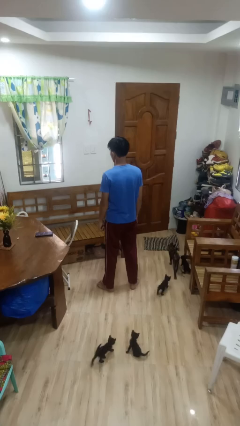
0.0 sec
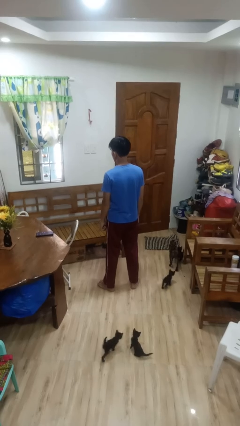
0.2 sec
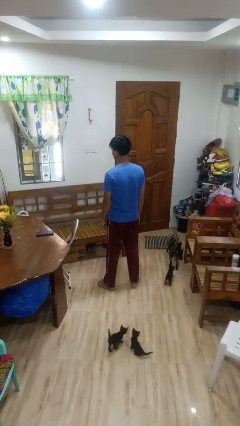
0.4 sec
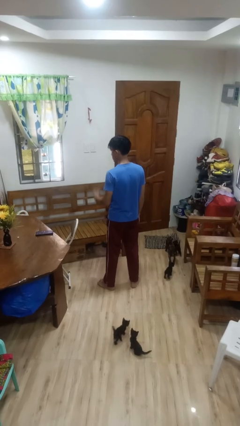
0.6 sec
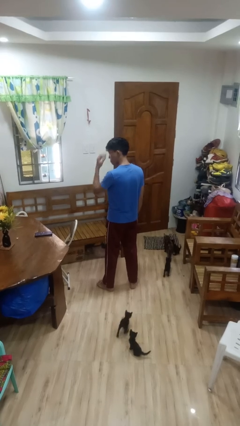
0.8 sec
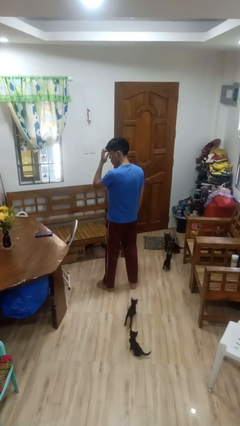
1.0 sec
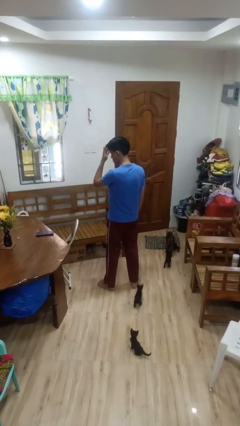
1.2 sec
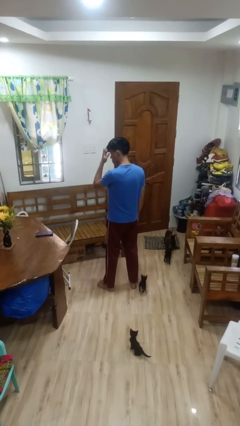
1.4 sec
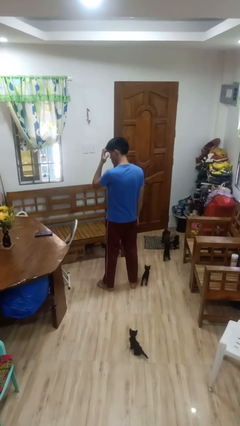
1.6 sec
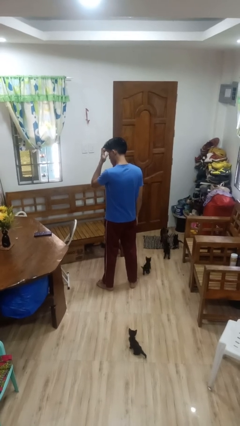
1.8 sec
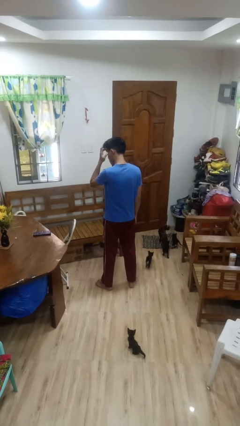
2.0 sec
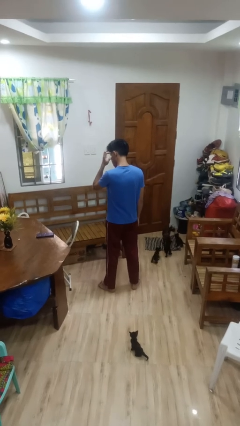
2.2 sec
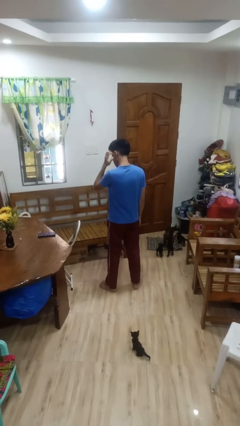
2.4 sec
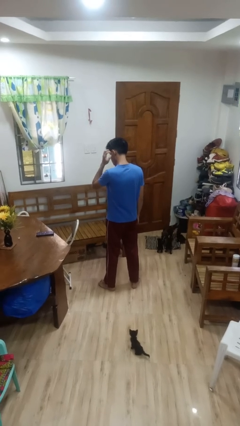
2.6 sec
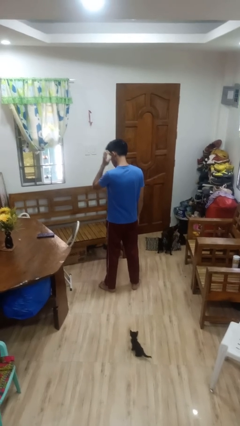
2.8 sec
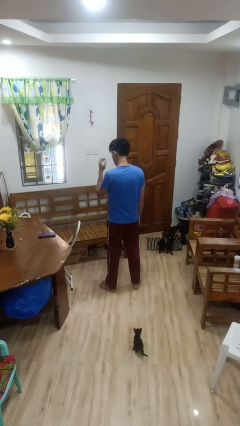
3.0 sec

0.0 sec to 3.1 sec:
person scratches face

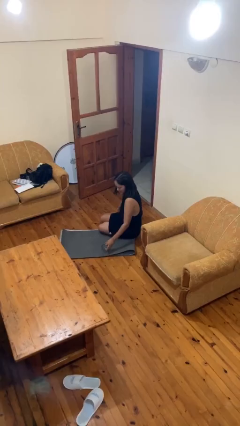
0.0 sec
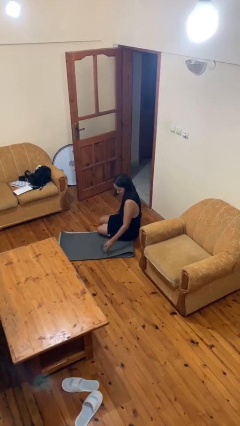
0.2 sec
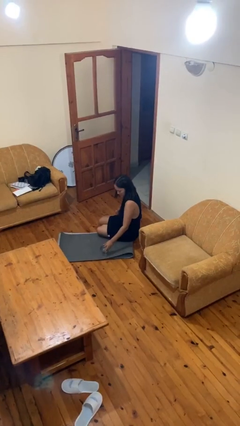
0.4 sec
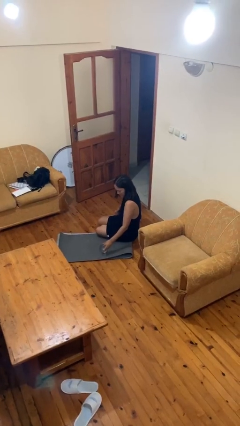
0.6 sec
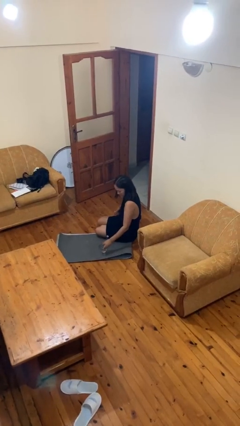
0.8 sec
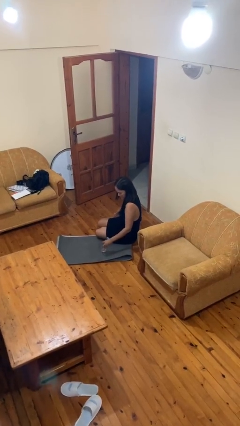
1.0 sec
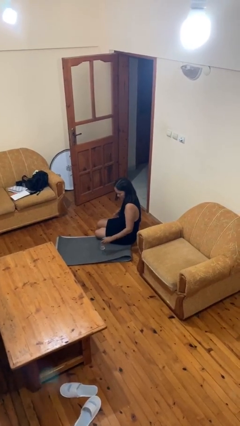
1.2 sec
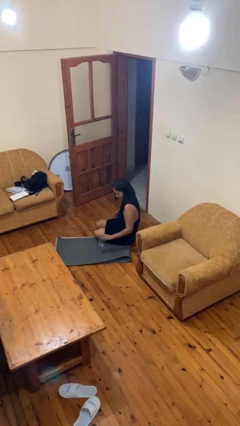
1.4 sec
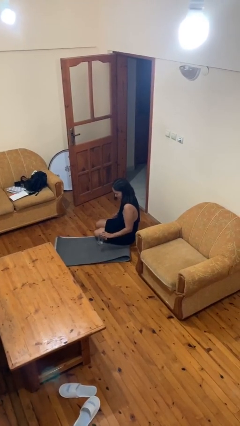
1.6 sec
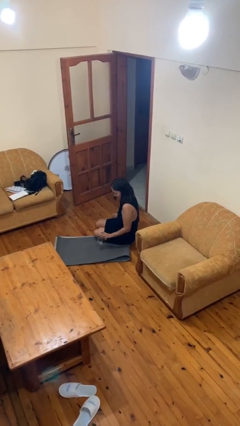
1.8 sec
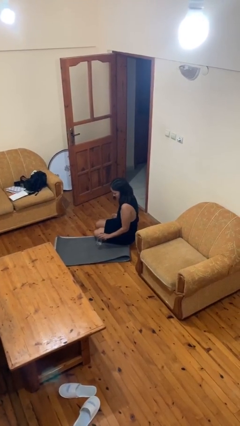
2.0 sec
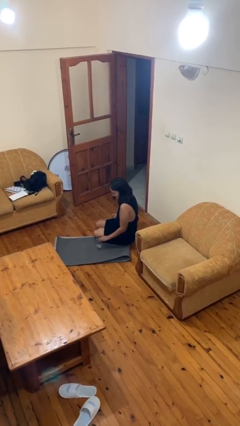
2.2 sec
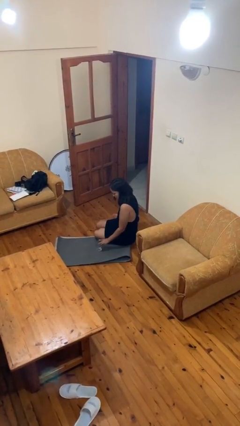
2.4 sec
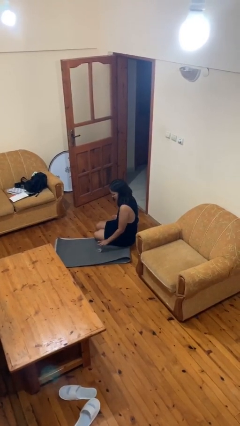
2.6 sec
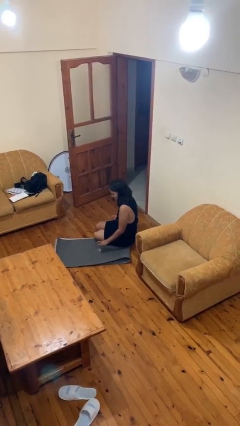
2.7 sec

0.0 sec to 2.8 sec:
person sets upright glass

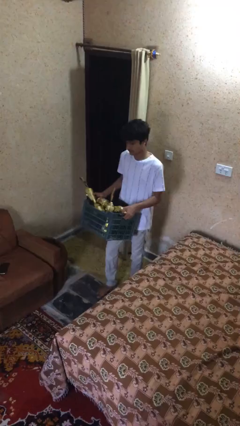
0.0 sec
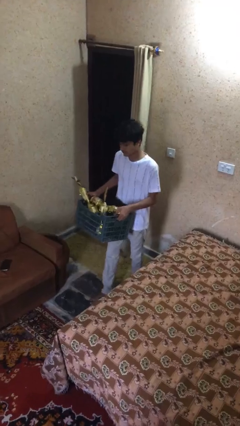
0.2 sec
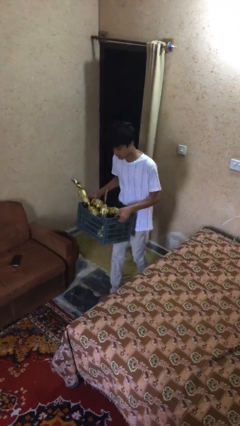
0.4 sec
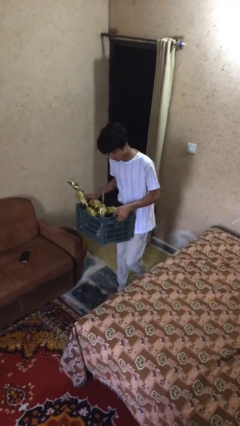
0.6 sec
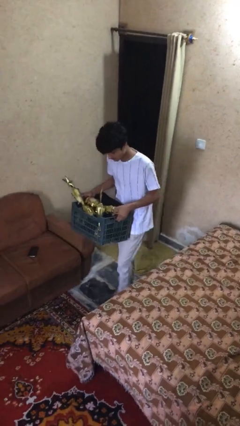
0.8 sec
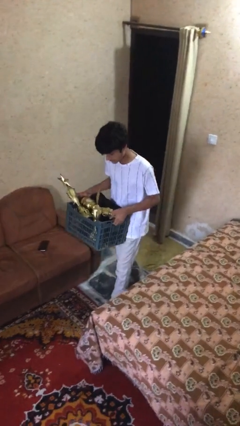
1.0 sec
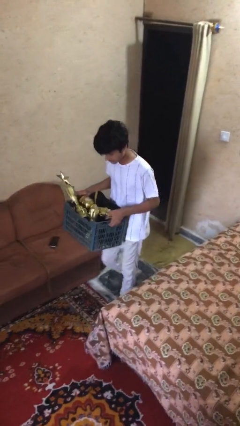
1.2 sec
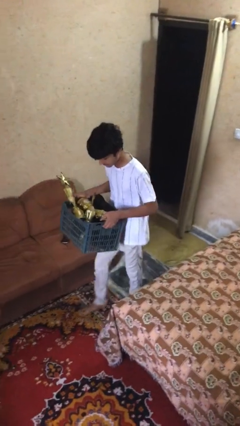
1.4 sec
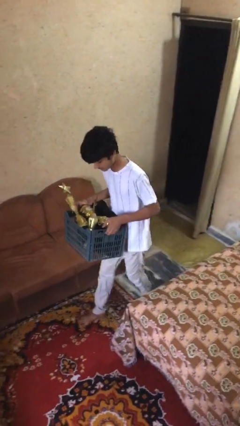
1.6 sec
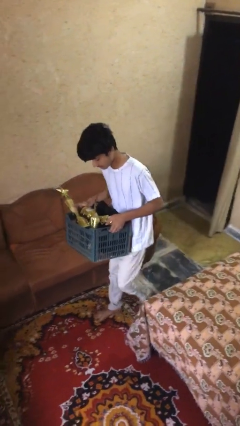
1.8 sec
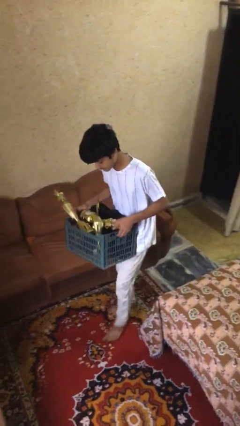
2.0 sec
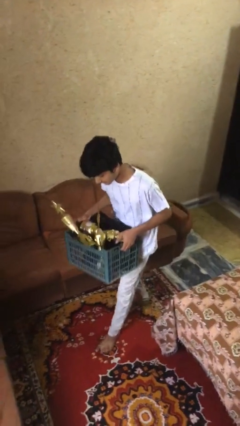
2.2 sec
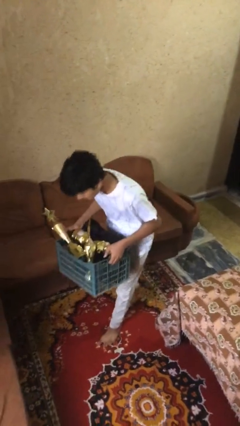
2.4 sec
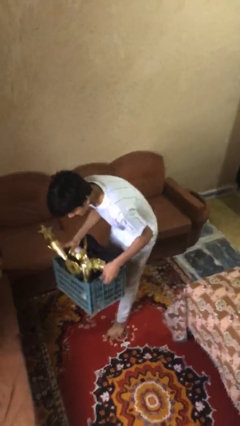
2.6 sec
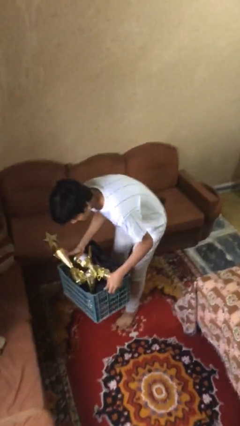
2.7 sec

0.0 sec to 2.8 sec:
person carries heavy object

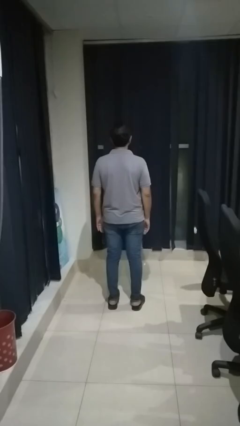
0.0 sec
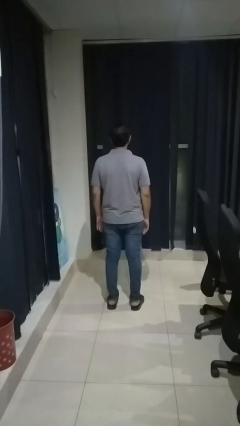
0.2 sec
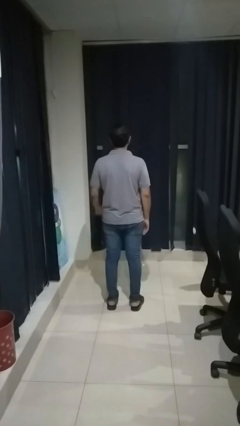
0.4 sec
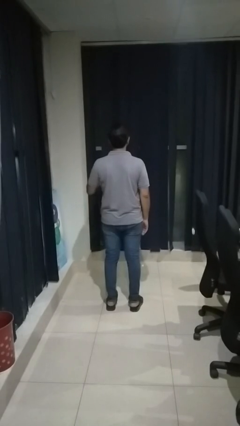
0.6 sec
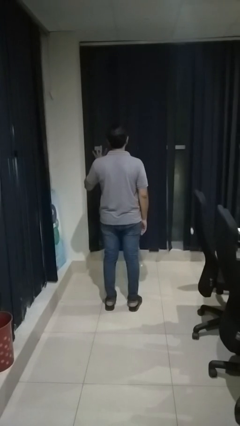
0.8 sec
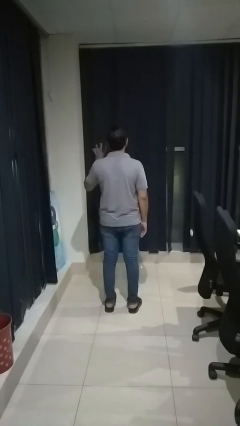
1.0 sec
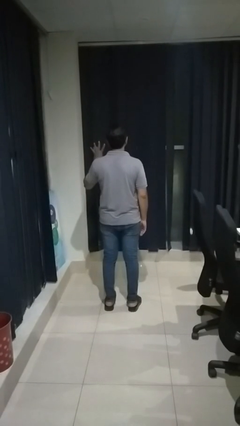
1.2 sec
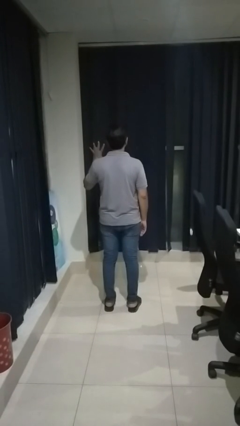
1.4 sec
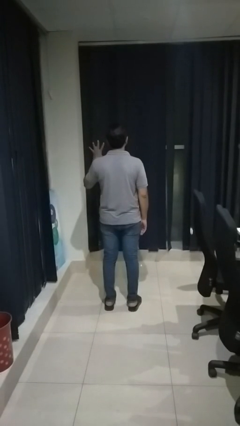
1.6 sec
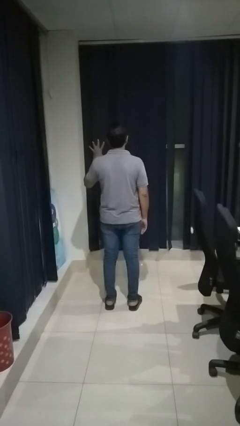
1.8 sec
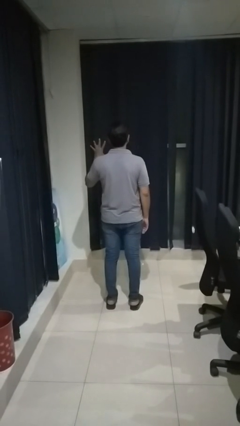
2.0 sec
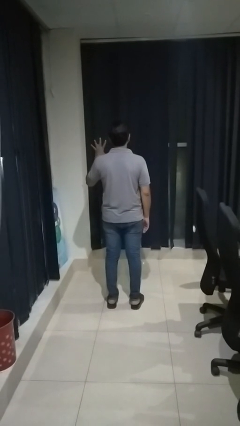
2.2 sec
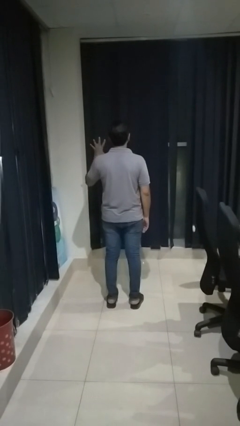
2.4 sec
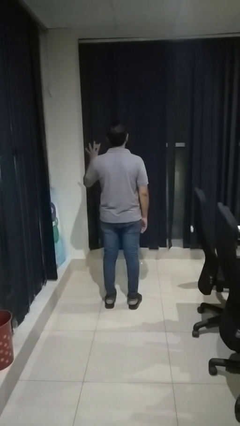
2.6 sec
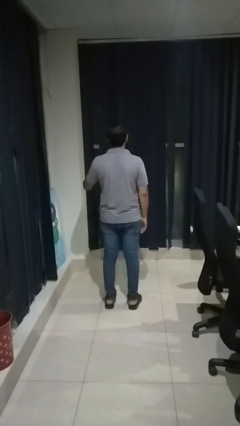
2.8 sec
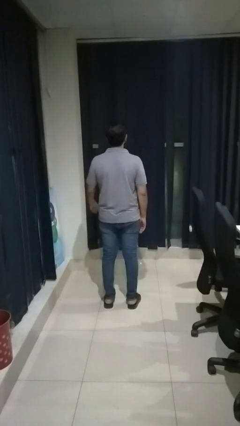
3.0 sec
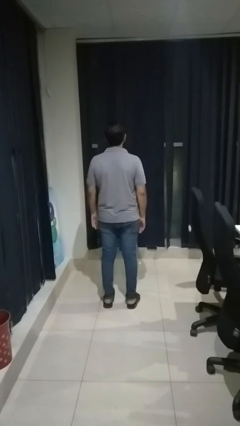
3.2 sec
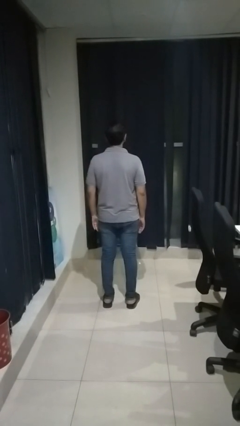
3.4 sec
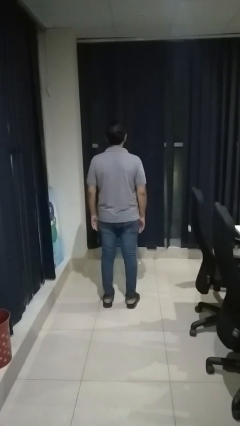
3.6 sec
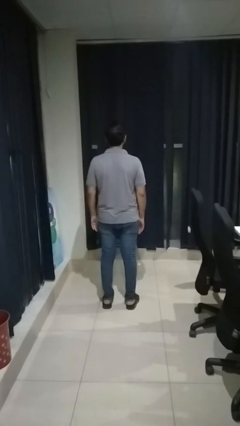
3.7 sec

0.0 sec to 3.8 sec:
person gestures number four

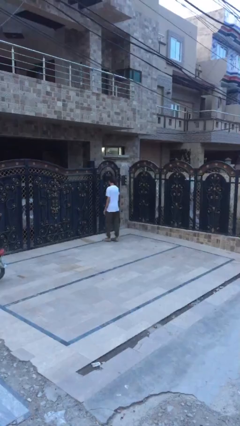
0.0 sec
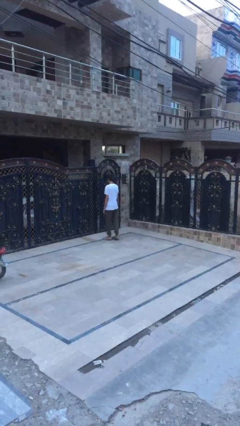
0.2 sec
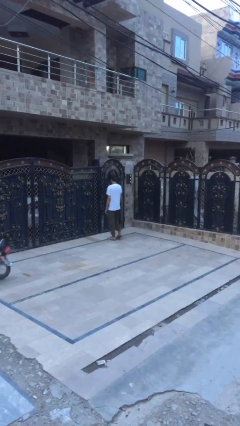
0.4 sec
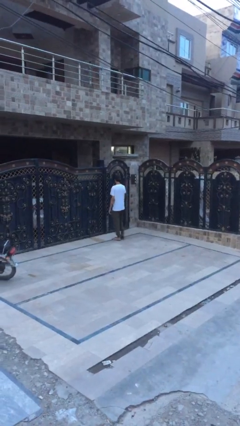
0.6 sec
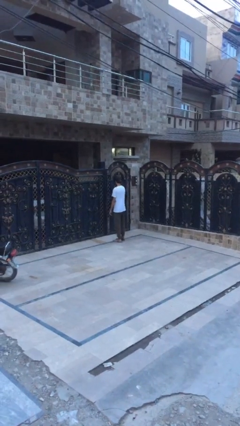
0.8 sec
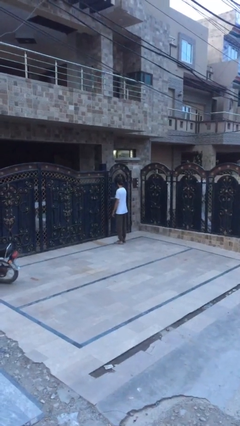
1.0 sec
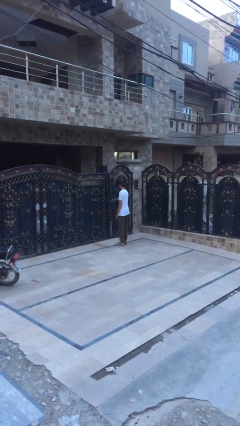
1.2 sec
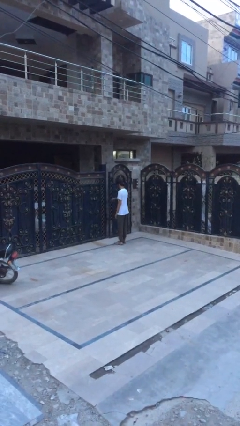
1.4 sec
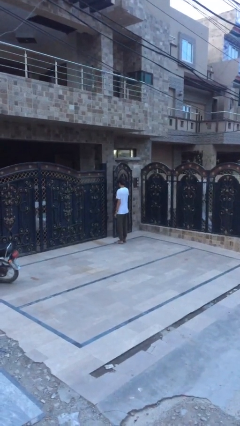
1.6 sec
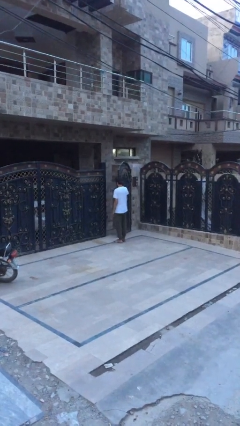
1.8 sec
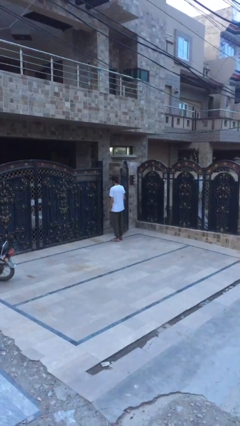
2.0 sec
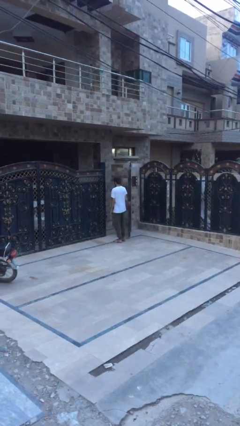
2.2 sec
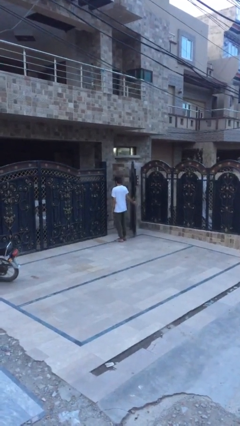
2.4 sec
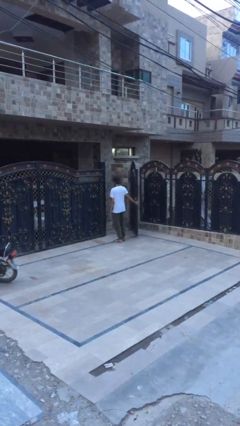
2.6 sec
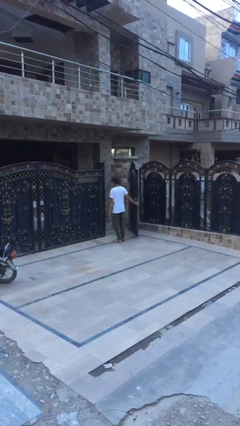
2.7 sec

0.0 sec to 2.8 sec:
person opens facility door

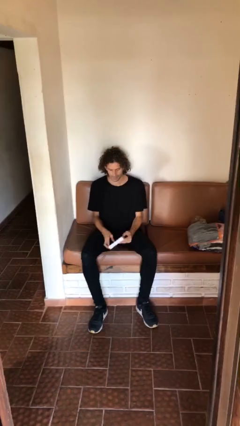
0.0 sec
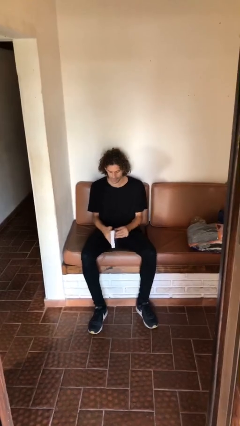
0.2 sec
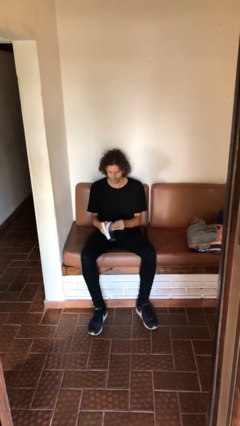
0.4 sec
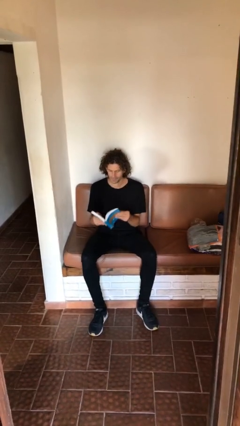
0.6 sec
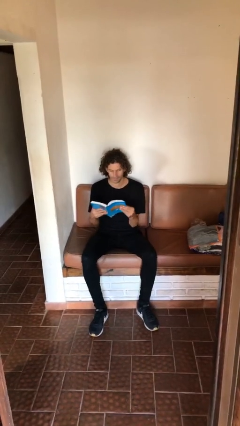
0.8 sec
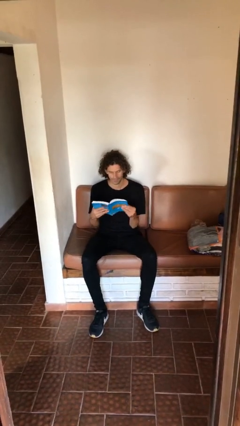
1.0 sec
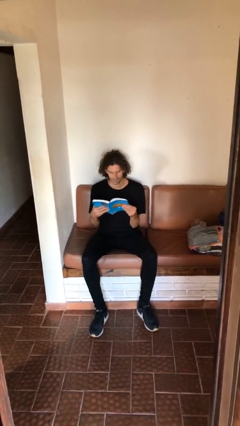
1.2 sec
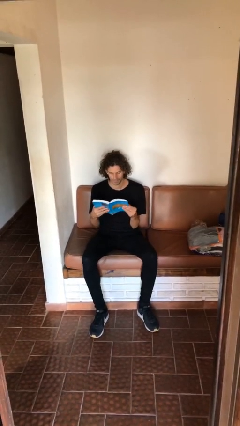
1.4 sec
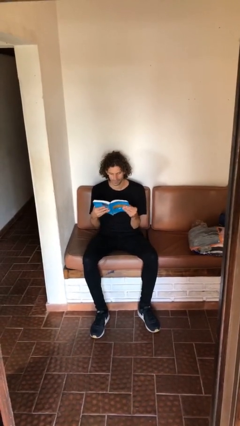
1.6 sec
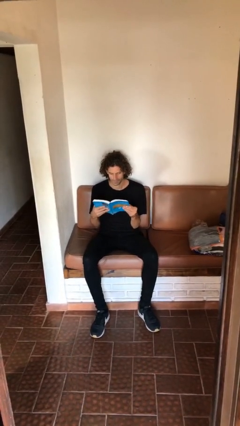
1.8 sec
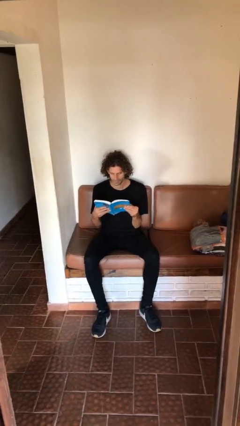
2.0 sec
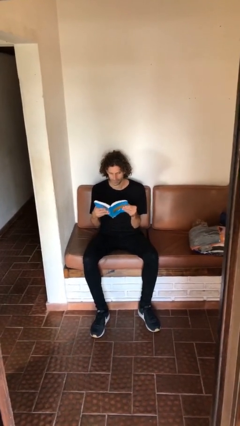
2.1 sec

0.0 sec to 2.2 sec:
person reads document
